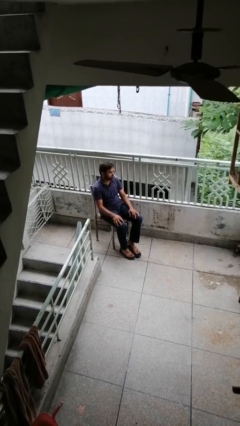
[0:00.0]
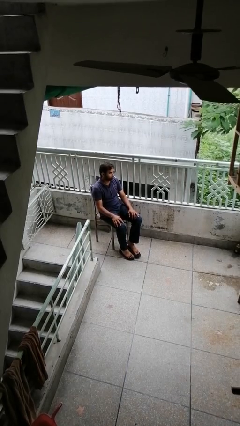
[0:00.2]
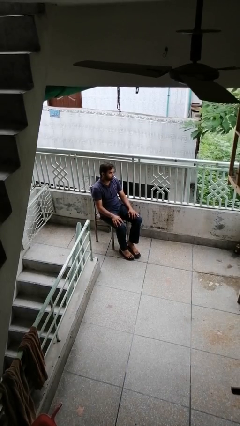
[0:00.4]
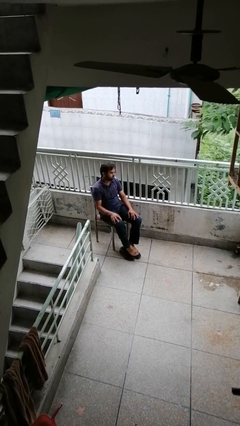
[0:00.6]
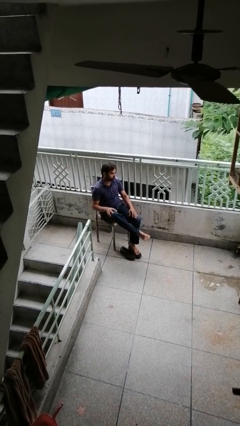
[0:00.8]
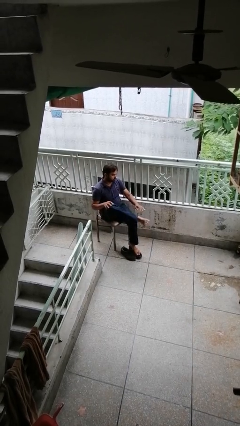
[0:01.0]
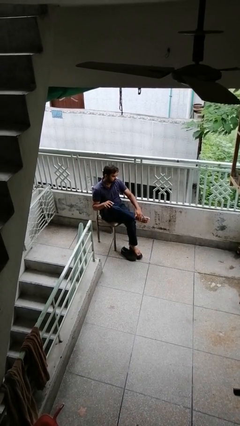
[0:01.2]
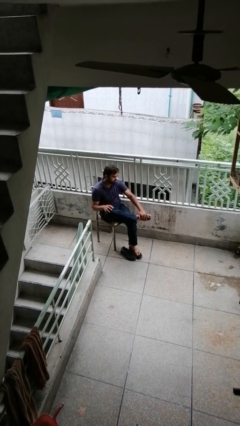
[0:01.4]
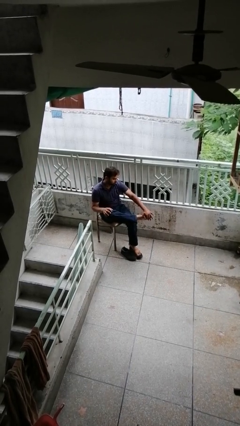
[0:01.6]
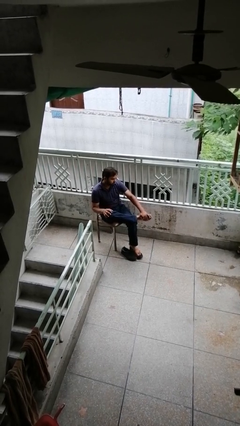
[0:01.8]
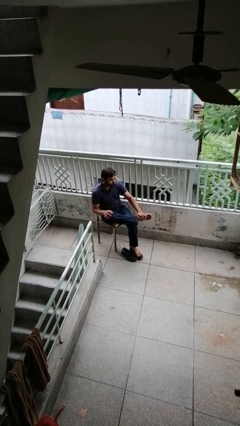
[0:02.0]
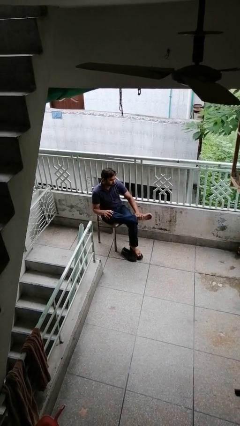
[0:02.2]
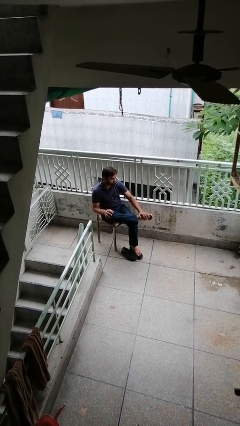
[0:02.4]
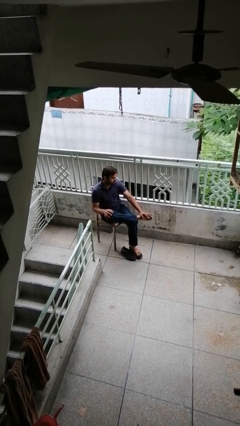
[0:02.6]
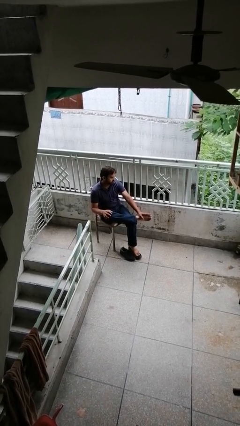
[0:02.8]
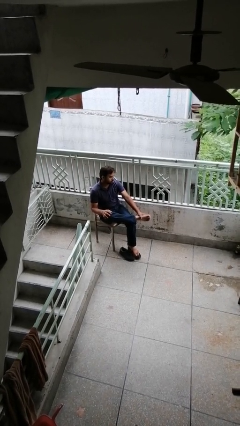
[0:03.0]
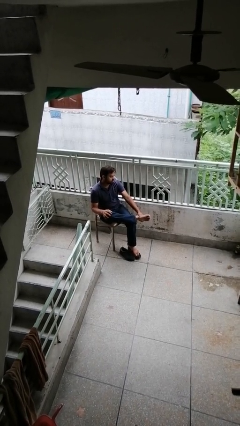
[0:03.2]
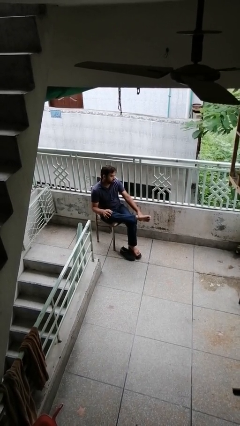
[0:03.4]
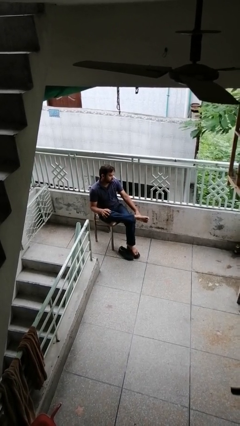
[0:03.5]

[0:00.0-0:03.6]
person rubs foot

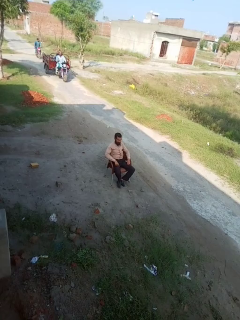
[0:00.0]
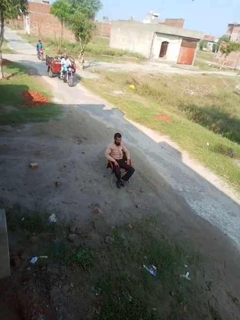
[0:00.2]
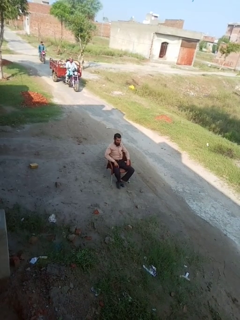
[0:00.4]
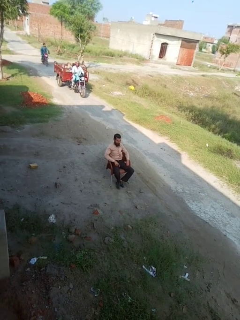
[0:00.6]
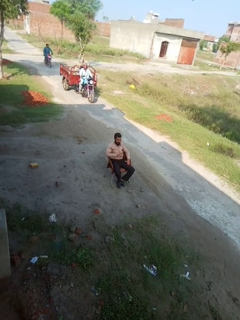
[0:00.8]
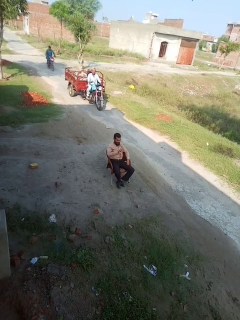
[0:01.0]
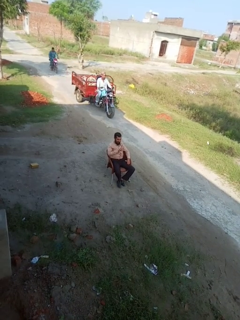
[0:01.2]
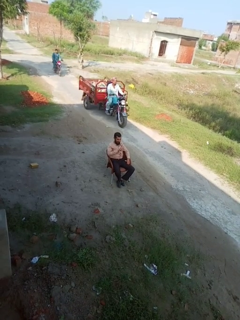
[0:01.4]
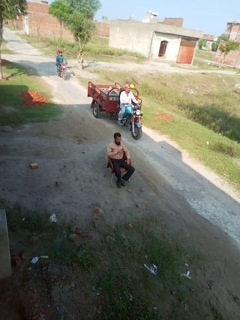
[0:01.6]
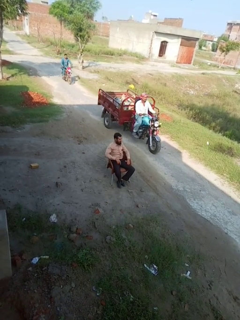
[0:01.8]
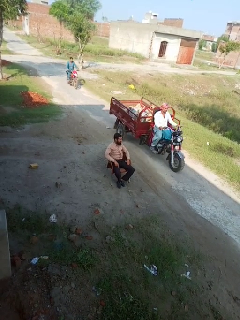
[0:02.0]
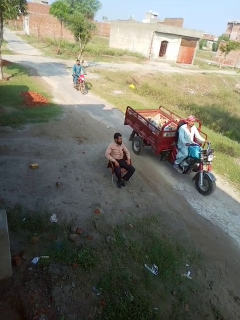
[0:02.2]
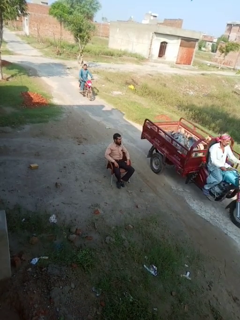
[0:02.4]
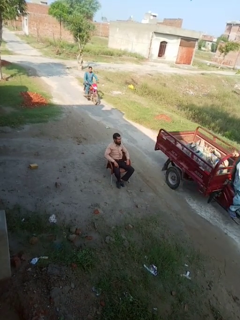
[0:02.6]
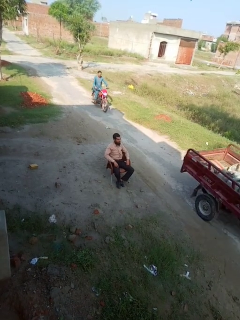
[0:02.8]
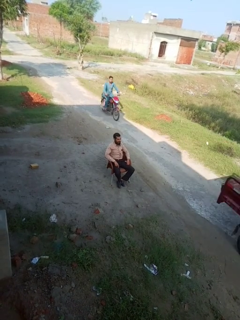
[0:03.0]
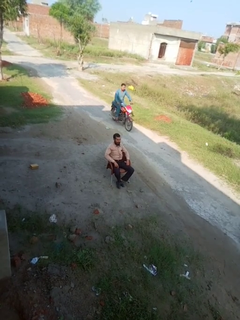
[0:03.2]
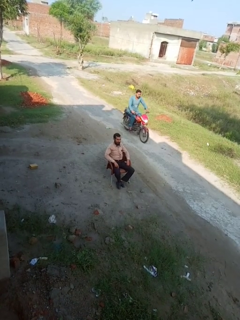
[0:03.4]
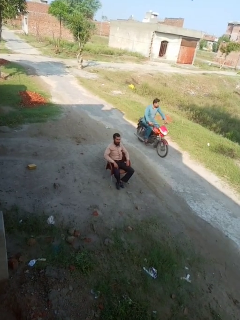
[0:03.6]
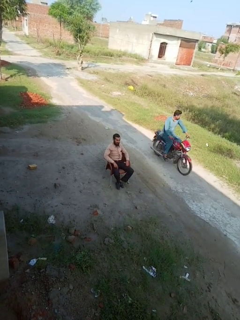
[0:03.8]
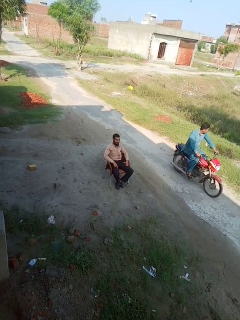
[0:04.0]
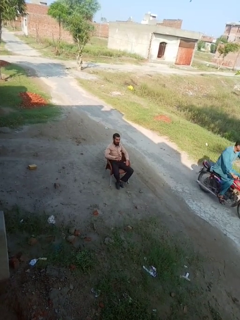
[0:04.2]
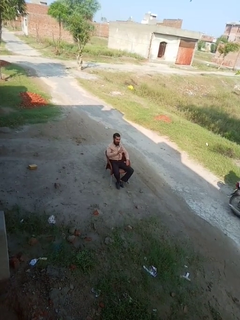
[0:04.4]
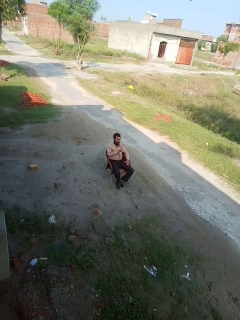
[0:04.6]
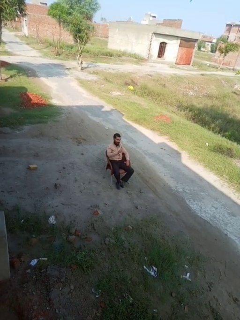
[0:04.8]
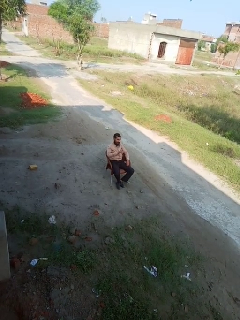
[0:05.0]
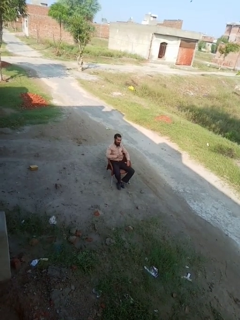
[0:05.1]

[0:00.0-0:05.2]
person gestures number one

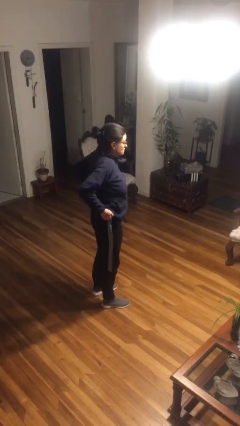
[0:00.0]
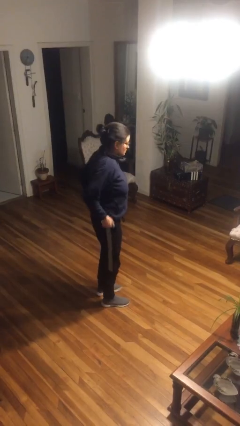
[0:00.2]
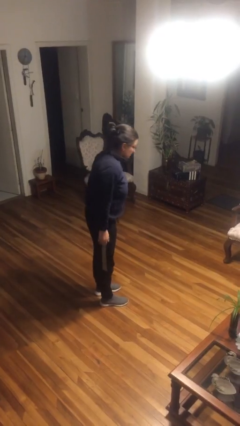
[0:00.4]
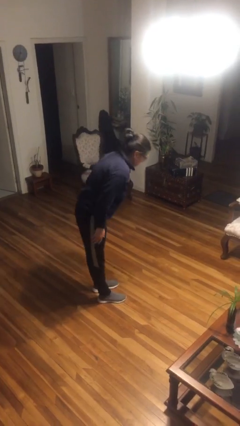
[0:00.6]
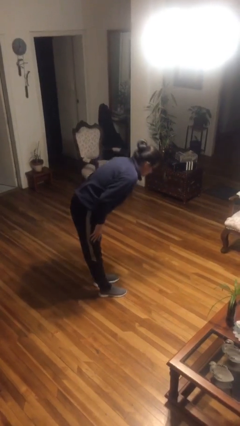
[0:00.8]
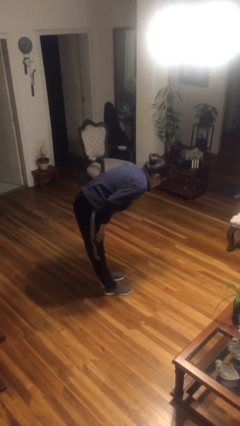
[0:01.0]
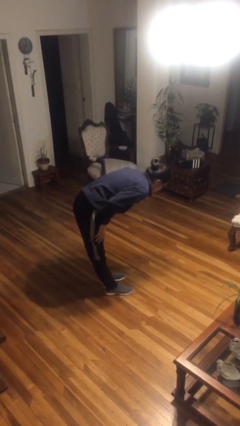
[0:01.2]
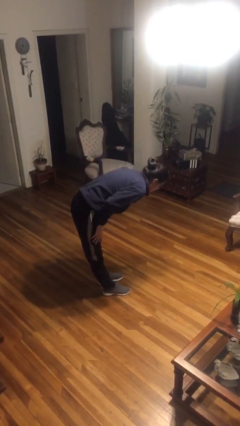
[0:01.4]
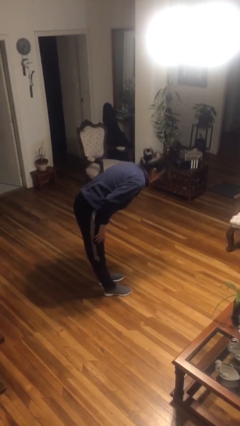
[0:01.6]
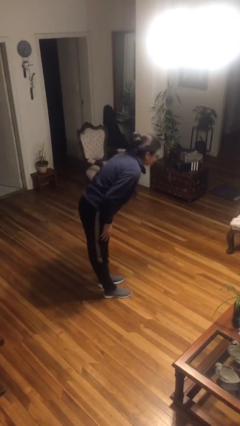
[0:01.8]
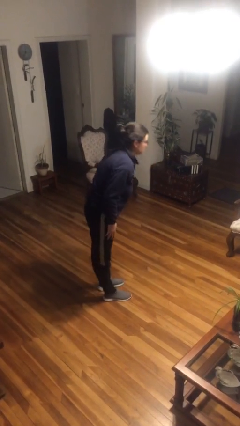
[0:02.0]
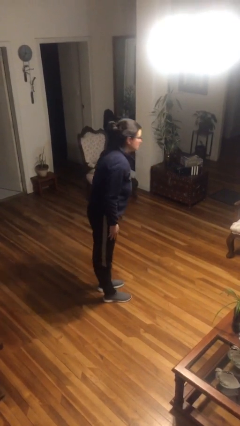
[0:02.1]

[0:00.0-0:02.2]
person bows

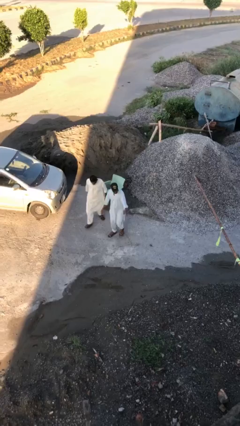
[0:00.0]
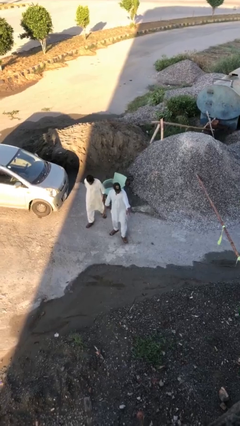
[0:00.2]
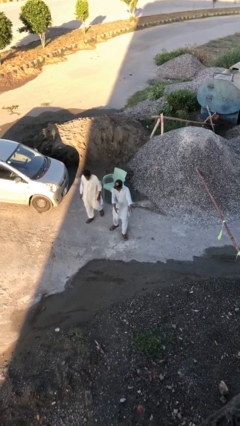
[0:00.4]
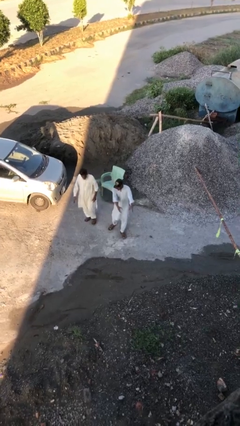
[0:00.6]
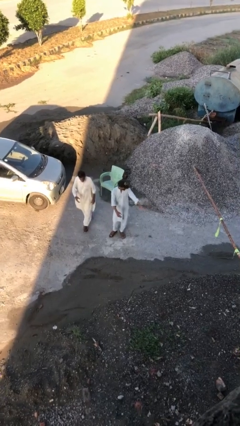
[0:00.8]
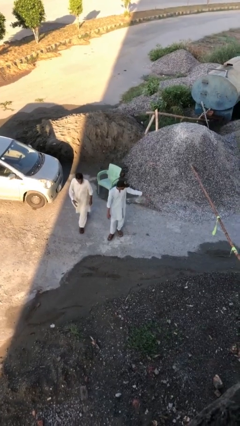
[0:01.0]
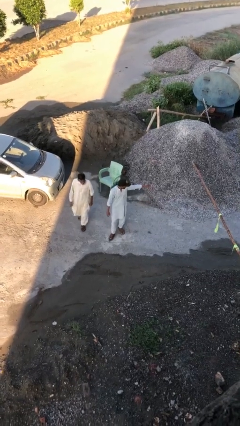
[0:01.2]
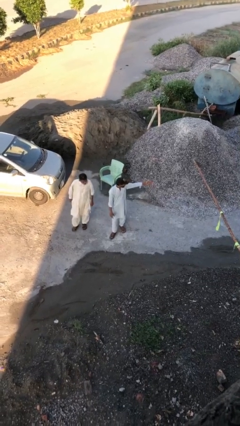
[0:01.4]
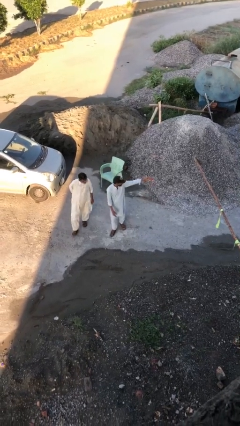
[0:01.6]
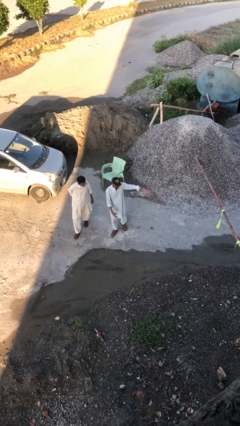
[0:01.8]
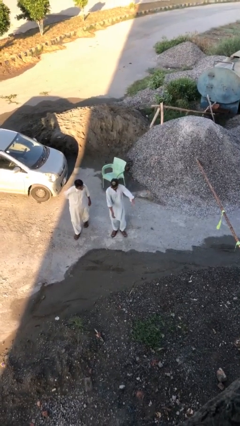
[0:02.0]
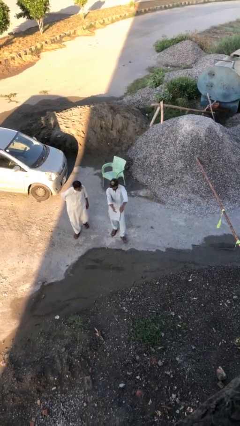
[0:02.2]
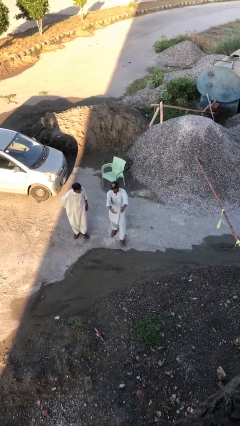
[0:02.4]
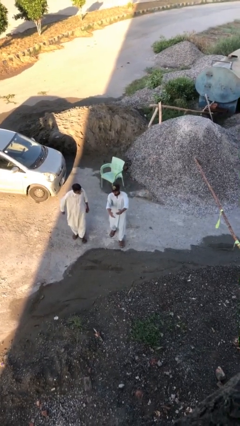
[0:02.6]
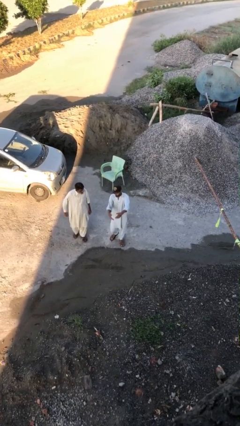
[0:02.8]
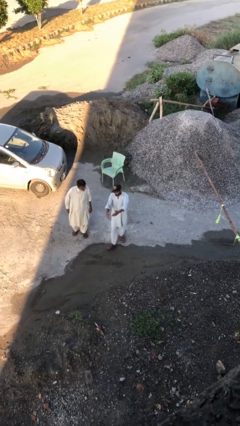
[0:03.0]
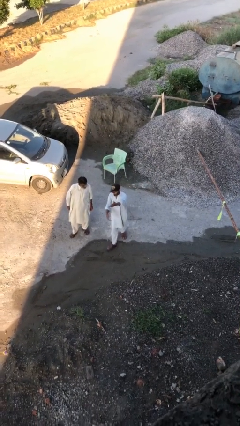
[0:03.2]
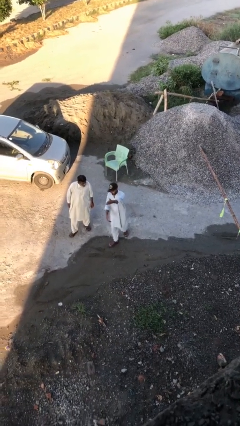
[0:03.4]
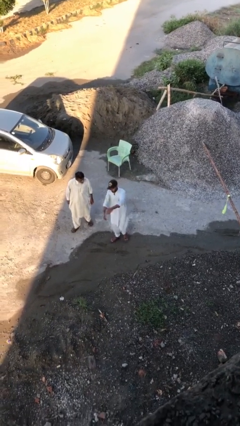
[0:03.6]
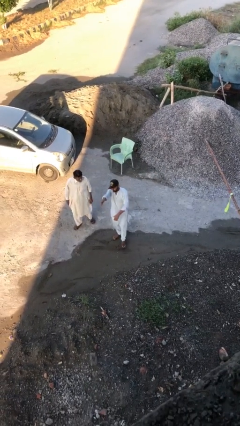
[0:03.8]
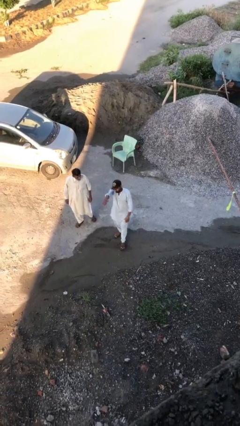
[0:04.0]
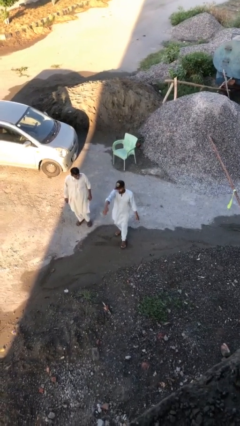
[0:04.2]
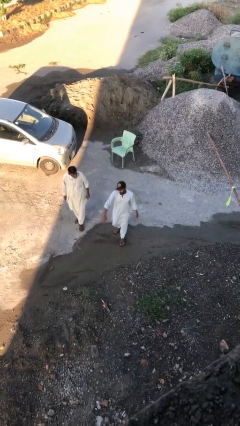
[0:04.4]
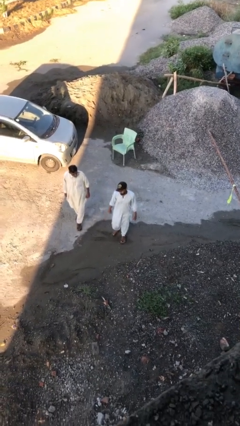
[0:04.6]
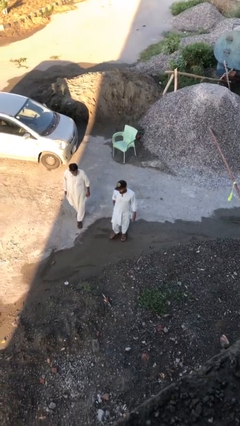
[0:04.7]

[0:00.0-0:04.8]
person talks to person

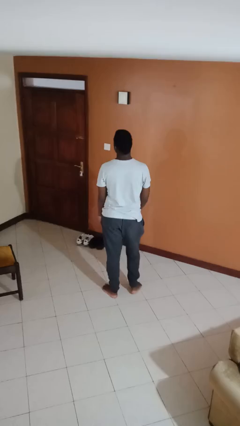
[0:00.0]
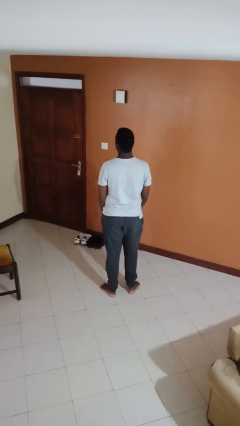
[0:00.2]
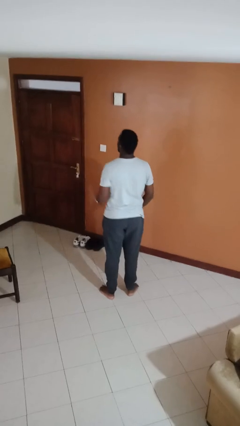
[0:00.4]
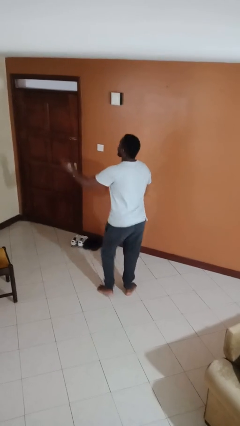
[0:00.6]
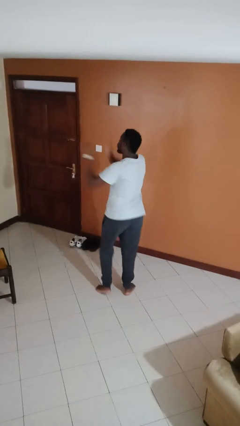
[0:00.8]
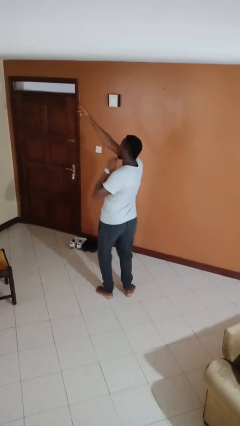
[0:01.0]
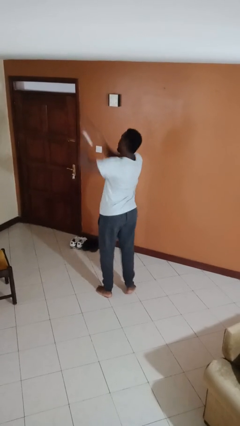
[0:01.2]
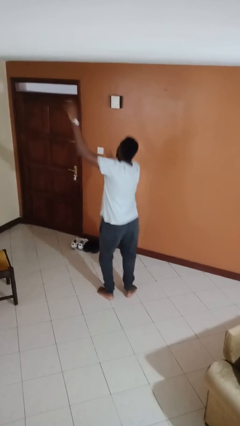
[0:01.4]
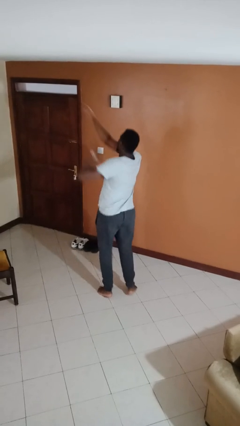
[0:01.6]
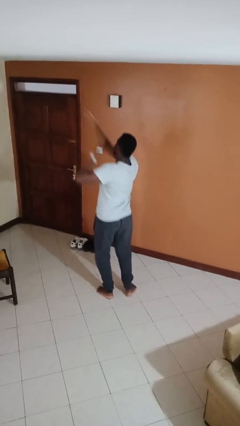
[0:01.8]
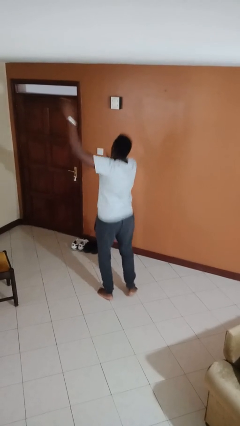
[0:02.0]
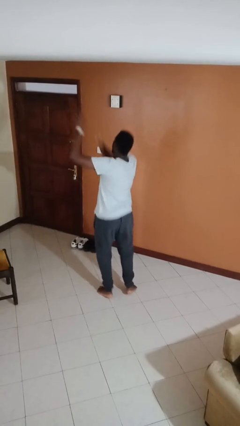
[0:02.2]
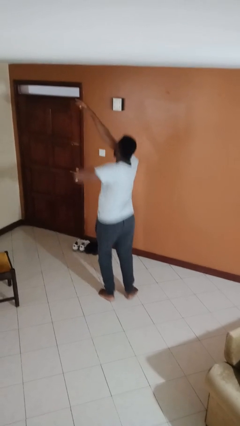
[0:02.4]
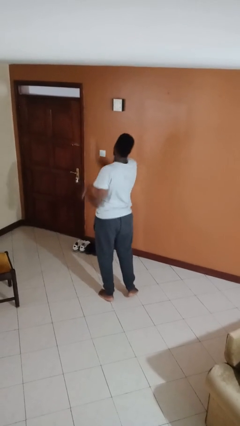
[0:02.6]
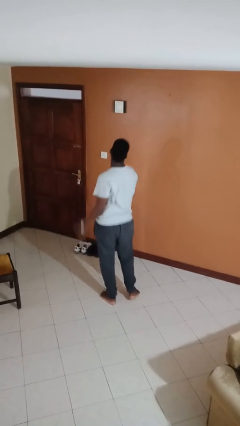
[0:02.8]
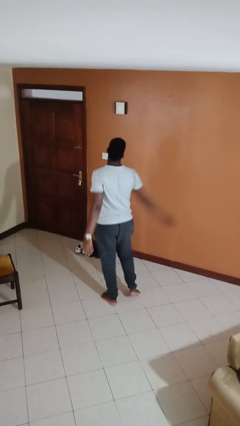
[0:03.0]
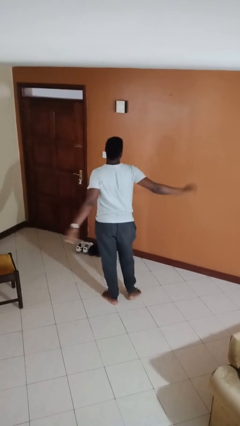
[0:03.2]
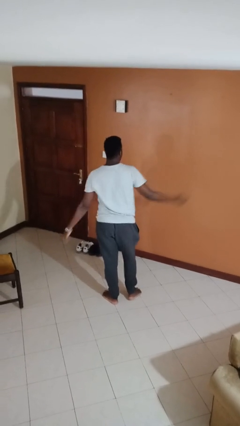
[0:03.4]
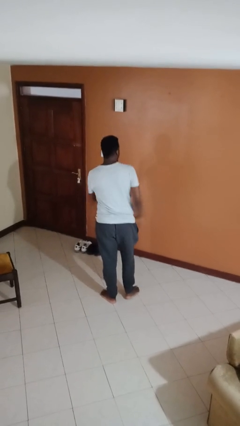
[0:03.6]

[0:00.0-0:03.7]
person dances in place
